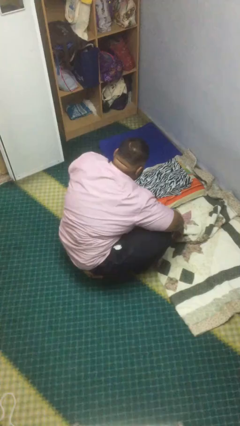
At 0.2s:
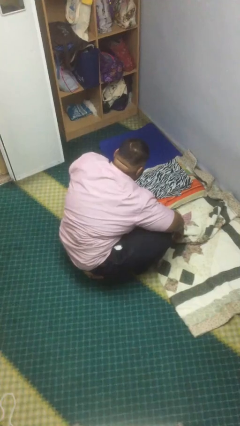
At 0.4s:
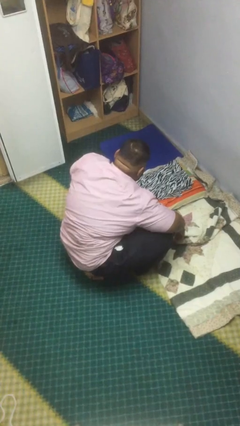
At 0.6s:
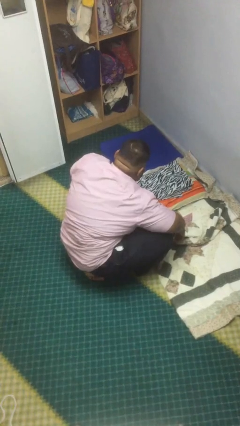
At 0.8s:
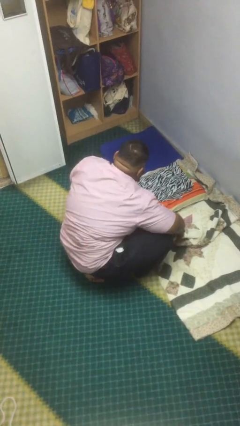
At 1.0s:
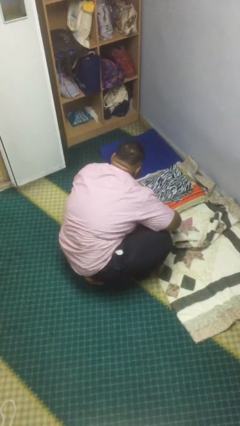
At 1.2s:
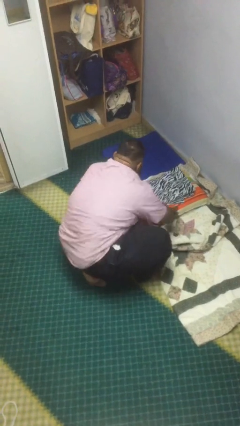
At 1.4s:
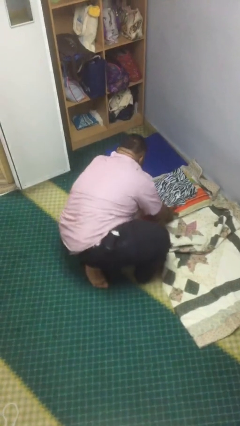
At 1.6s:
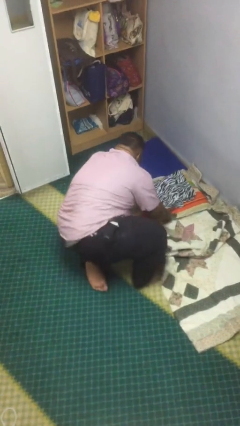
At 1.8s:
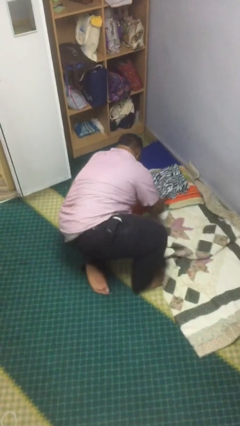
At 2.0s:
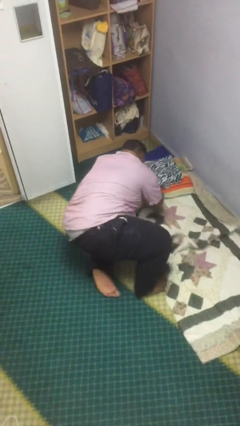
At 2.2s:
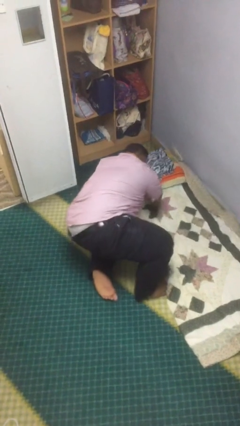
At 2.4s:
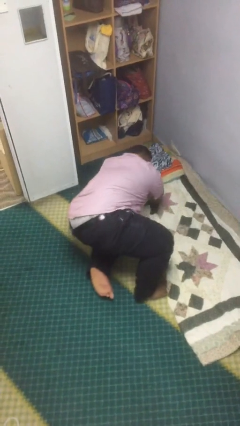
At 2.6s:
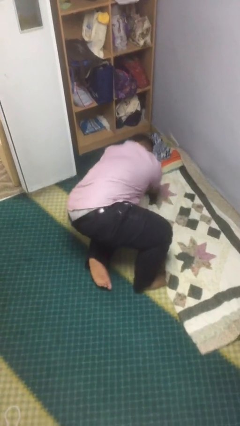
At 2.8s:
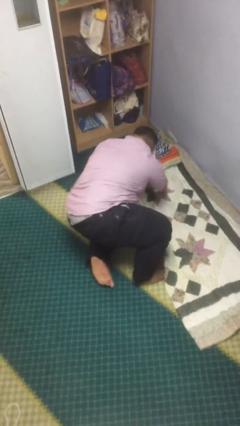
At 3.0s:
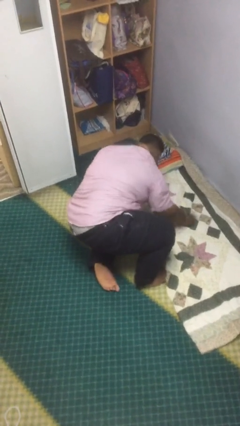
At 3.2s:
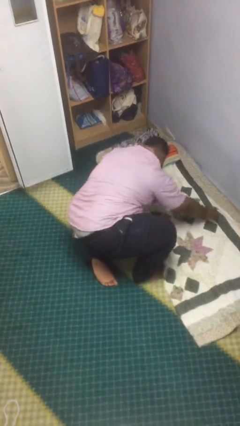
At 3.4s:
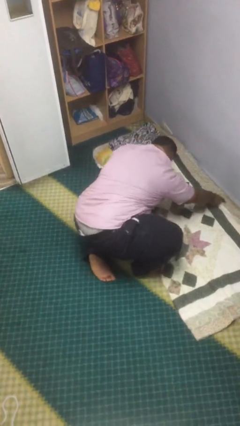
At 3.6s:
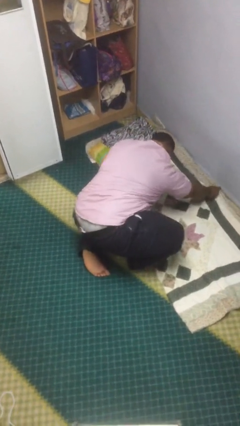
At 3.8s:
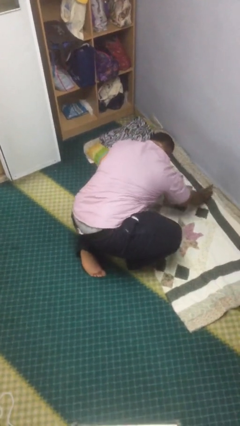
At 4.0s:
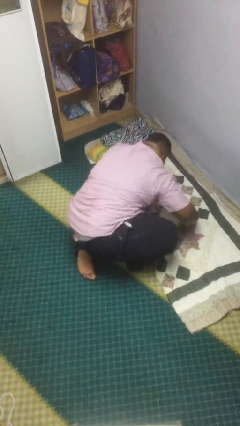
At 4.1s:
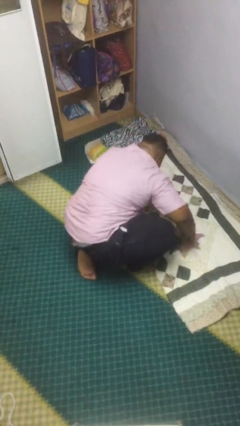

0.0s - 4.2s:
person makes bed

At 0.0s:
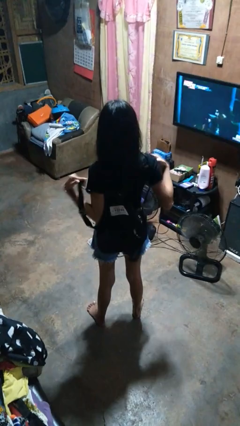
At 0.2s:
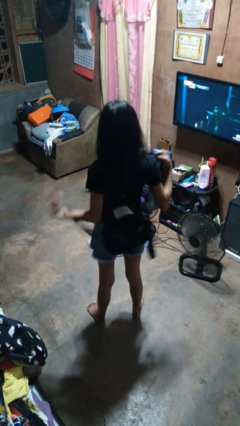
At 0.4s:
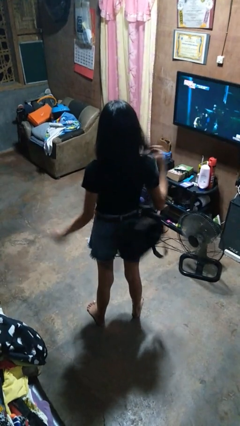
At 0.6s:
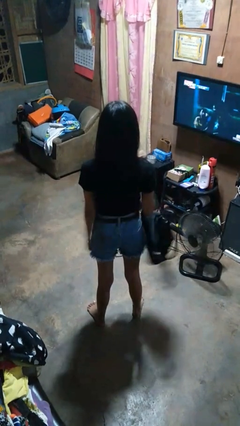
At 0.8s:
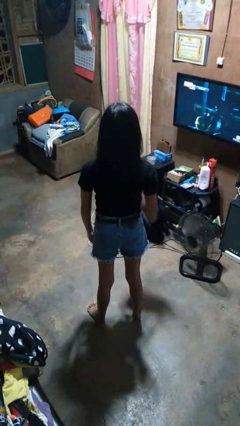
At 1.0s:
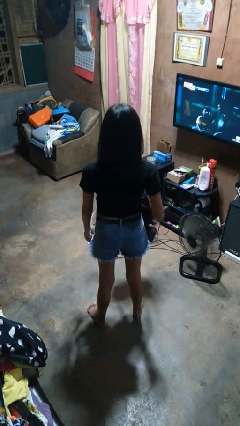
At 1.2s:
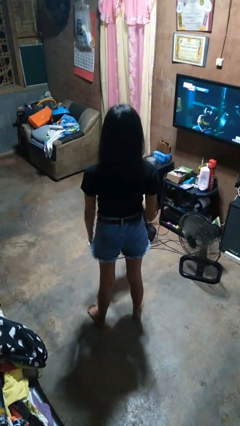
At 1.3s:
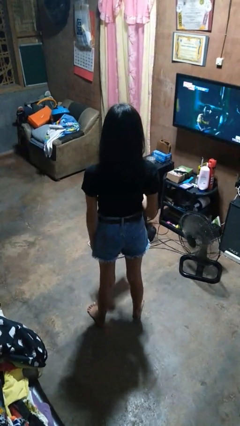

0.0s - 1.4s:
person takes off backpack

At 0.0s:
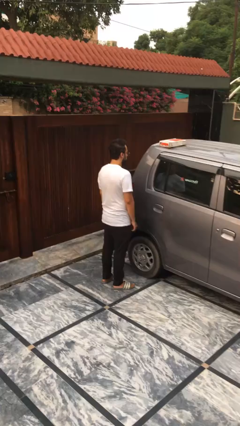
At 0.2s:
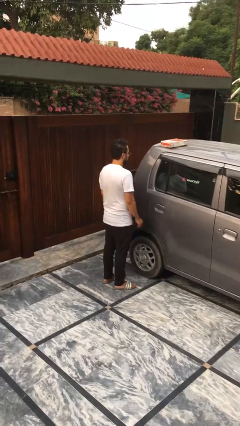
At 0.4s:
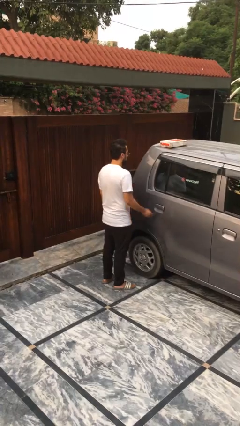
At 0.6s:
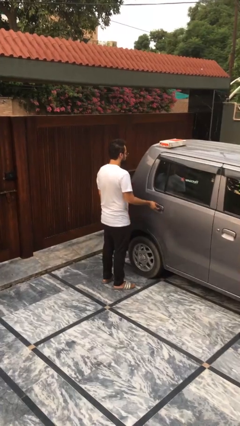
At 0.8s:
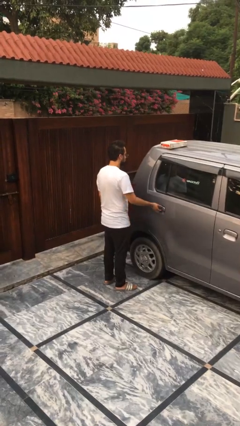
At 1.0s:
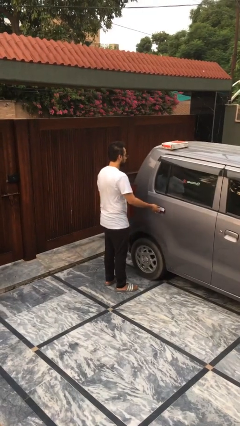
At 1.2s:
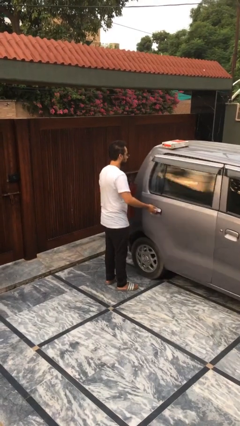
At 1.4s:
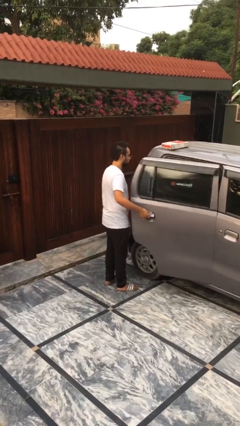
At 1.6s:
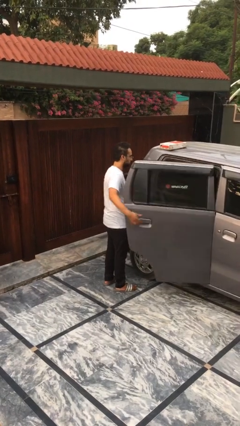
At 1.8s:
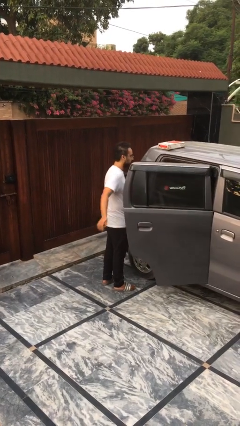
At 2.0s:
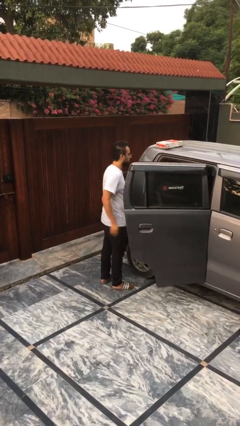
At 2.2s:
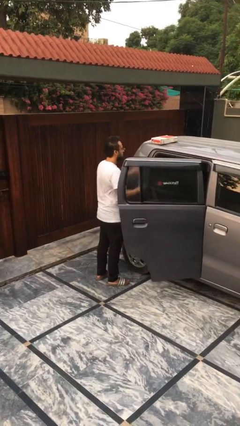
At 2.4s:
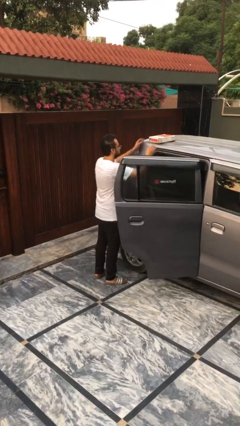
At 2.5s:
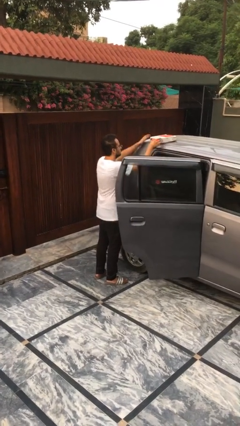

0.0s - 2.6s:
person opens car door

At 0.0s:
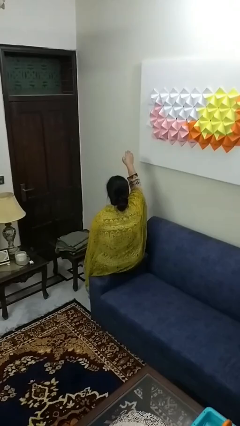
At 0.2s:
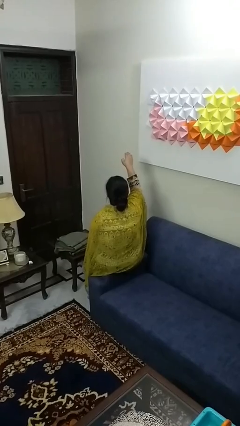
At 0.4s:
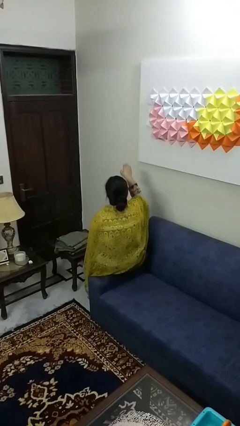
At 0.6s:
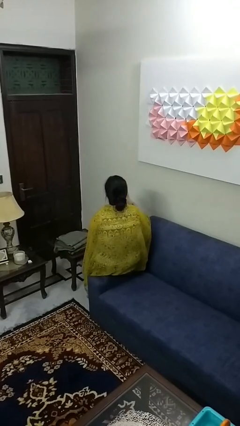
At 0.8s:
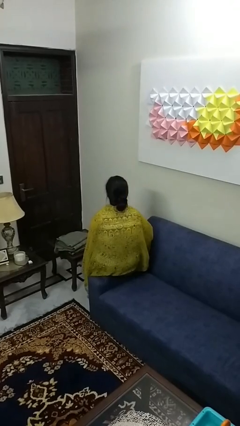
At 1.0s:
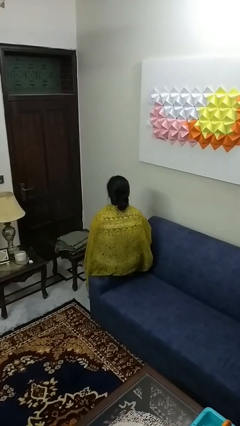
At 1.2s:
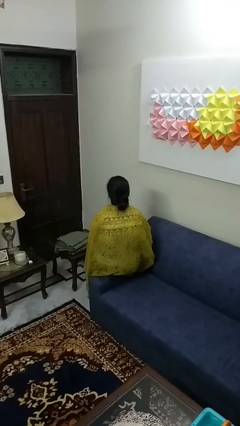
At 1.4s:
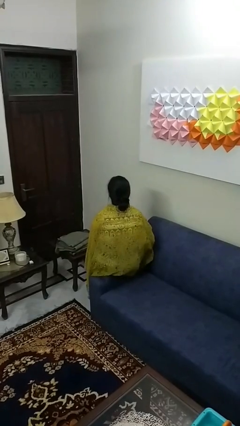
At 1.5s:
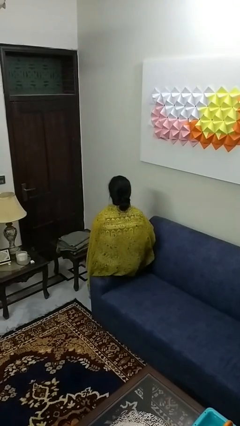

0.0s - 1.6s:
person gestures swipe down

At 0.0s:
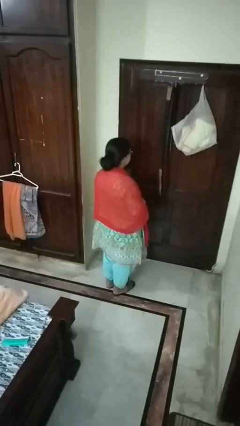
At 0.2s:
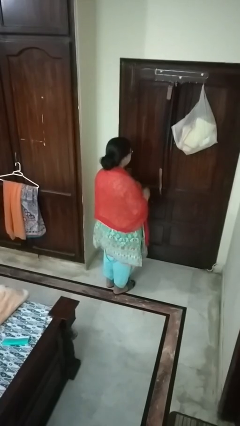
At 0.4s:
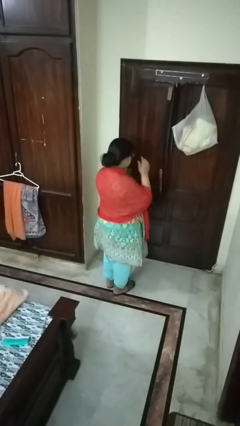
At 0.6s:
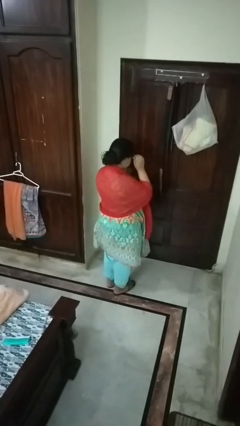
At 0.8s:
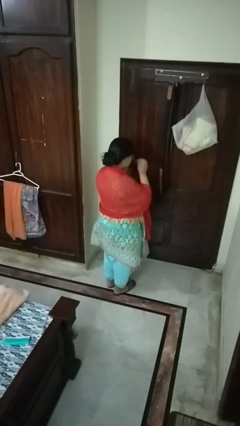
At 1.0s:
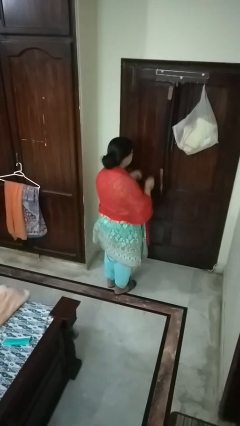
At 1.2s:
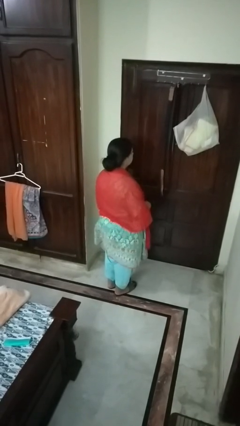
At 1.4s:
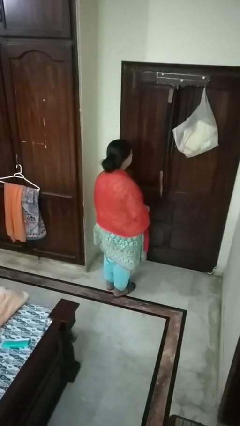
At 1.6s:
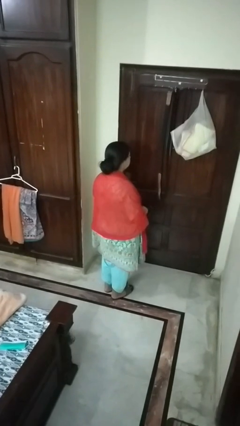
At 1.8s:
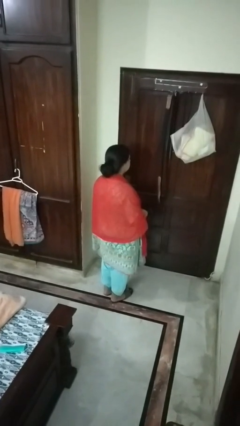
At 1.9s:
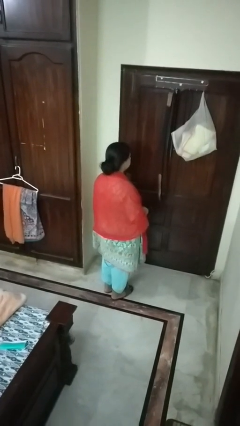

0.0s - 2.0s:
person takes off glasses

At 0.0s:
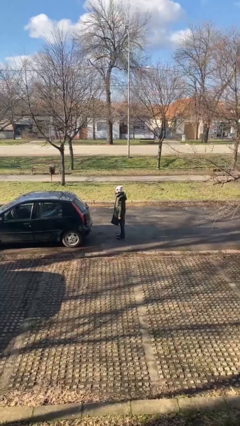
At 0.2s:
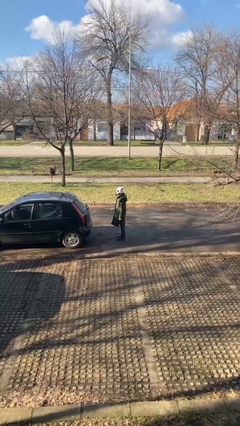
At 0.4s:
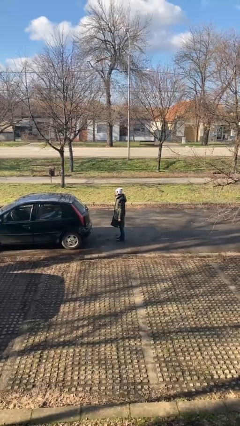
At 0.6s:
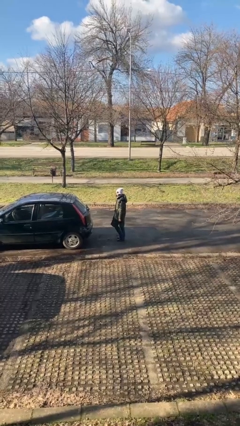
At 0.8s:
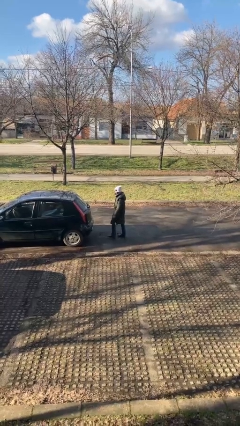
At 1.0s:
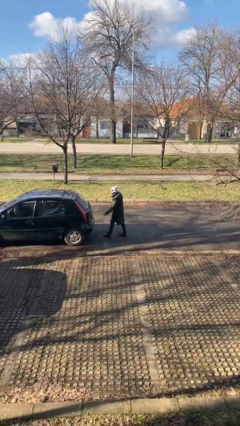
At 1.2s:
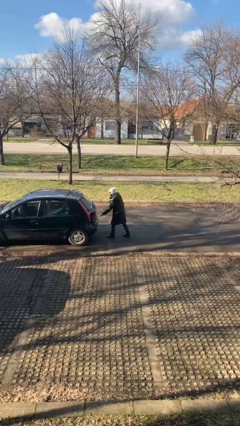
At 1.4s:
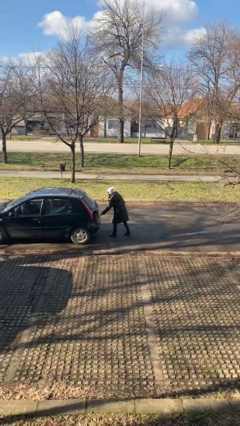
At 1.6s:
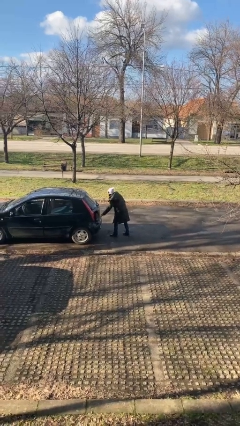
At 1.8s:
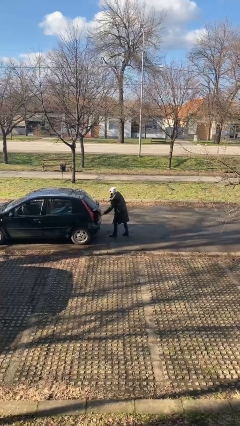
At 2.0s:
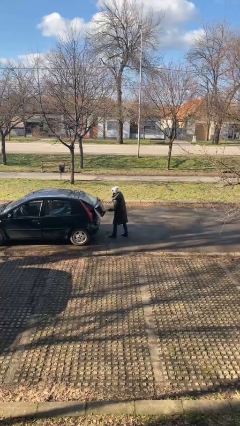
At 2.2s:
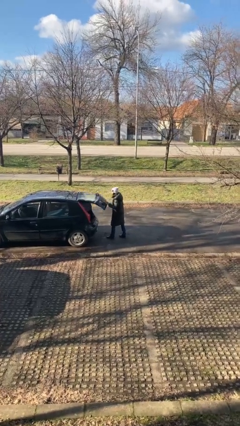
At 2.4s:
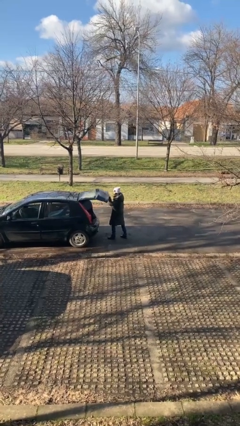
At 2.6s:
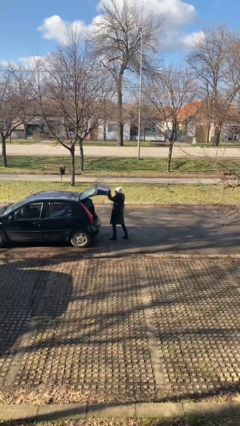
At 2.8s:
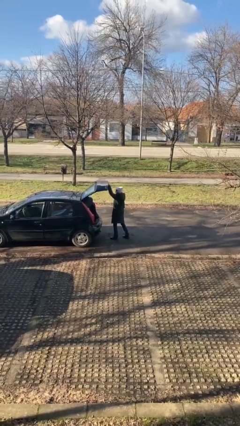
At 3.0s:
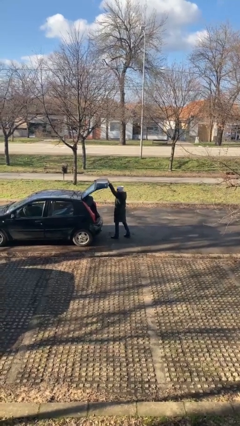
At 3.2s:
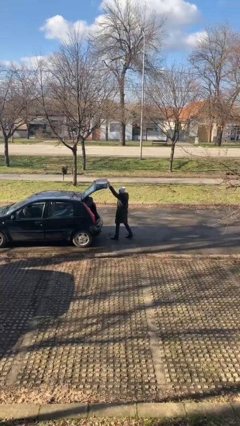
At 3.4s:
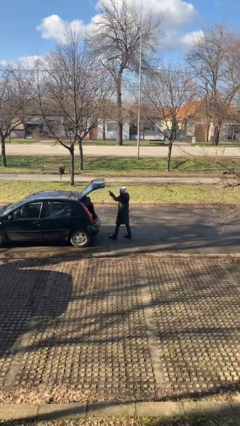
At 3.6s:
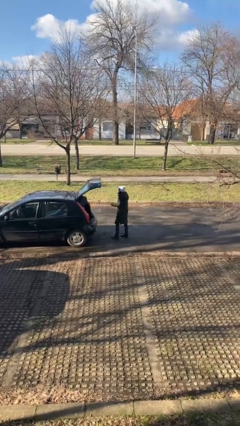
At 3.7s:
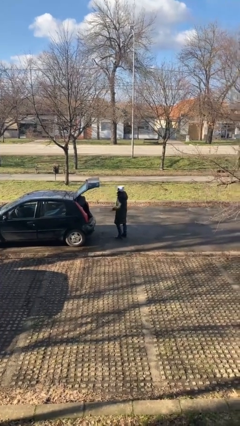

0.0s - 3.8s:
person opens car trunk

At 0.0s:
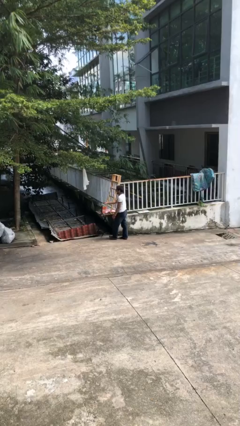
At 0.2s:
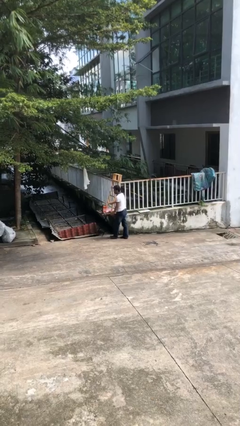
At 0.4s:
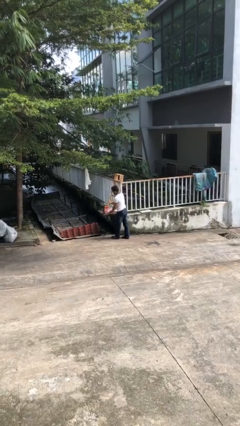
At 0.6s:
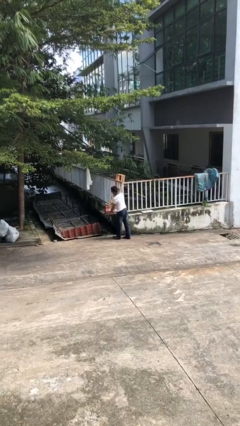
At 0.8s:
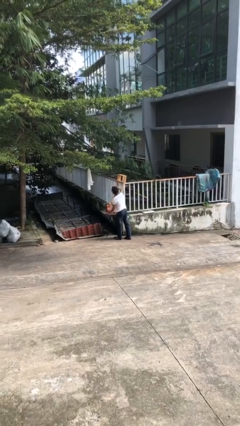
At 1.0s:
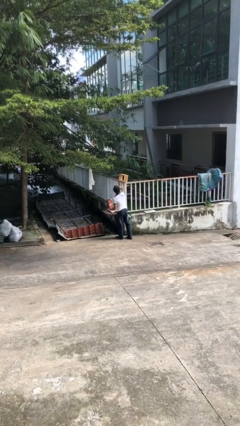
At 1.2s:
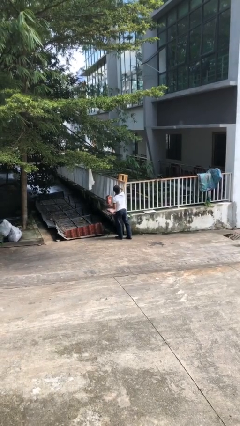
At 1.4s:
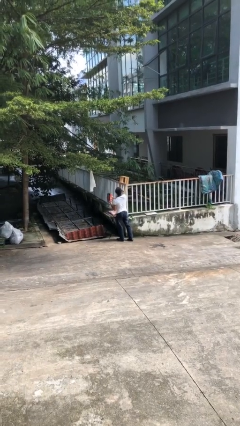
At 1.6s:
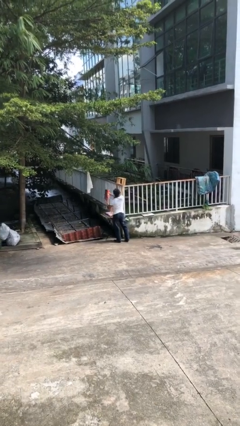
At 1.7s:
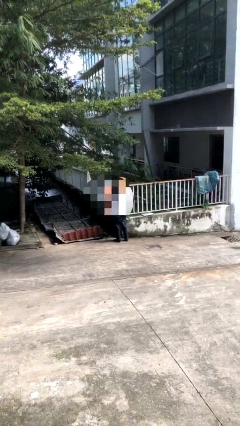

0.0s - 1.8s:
person picks up object from table
